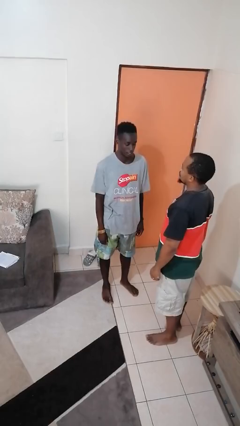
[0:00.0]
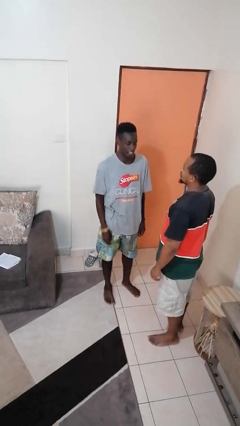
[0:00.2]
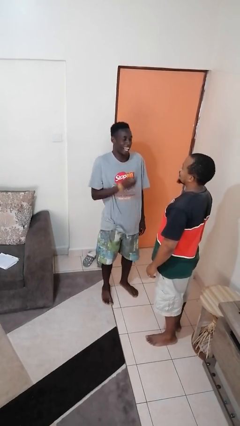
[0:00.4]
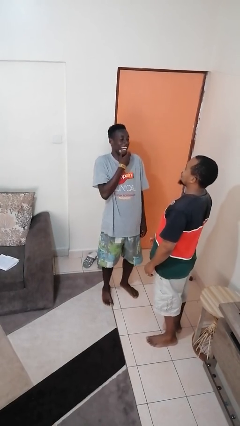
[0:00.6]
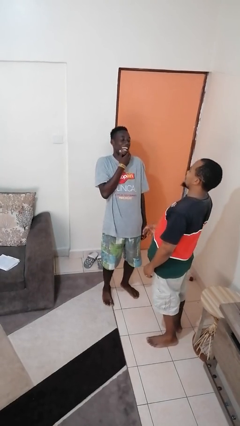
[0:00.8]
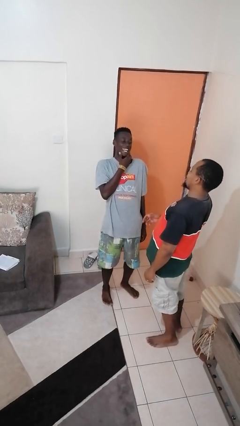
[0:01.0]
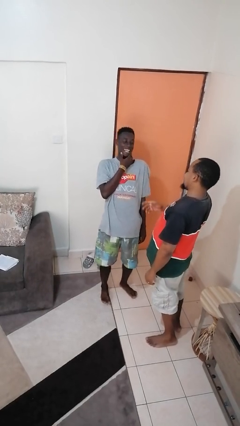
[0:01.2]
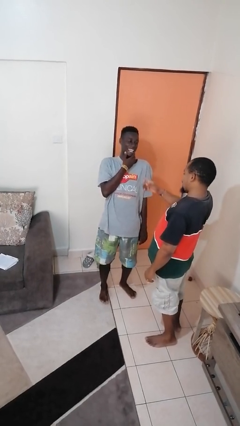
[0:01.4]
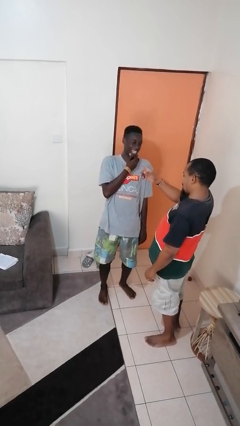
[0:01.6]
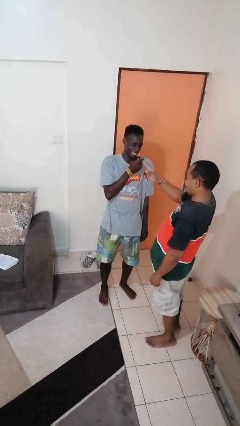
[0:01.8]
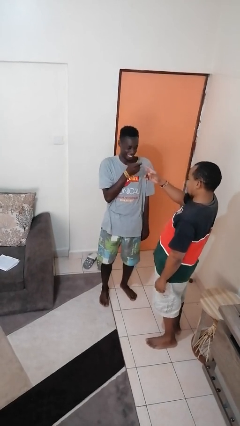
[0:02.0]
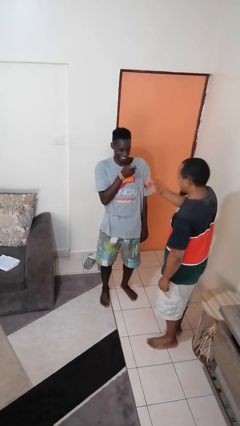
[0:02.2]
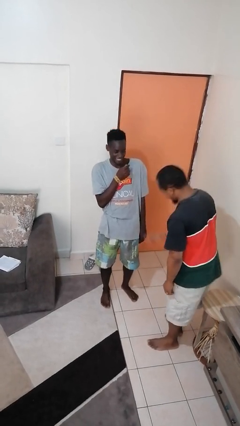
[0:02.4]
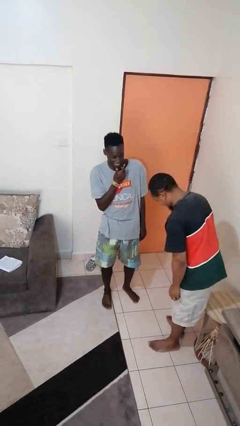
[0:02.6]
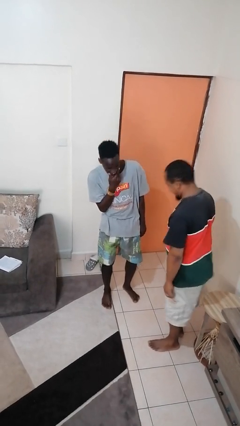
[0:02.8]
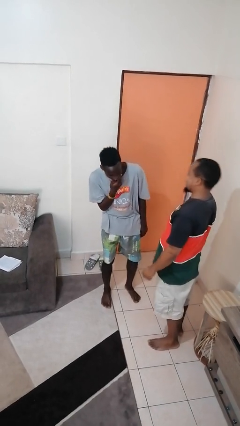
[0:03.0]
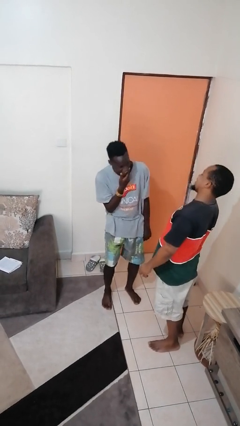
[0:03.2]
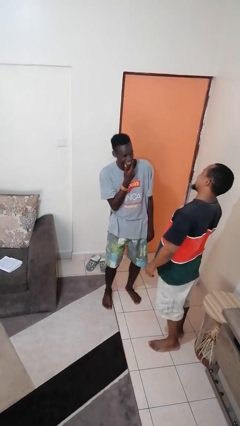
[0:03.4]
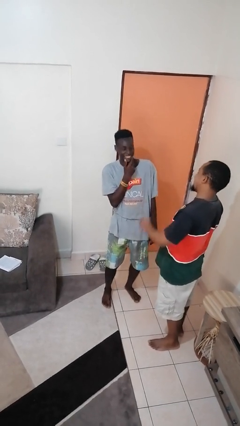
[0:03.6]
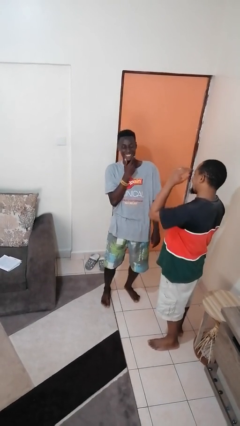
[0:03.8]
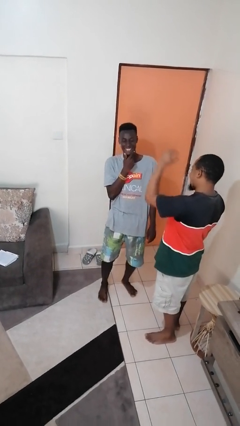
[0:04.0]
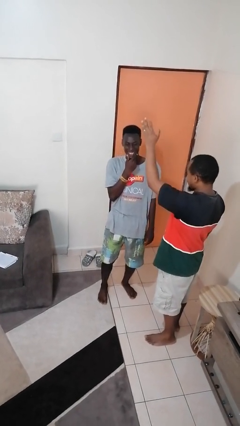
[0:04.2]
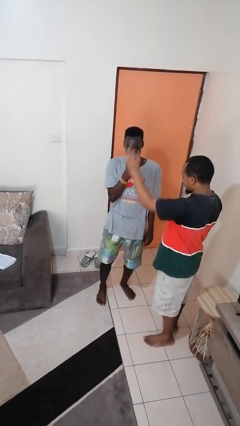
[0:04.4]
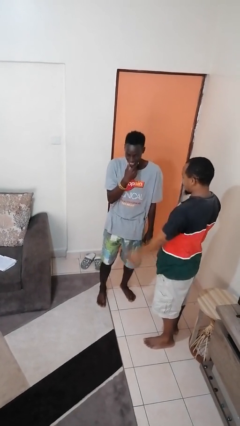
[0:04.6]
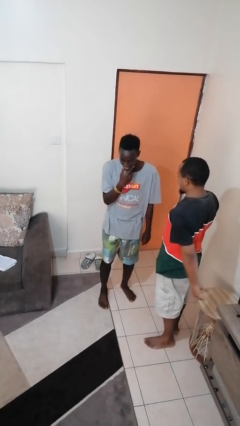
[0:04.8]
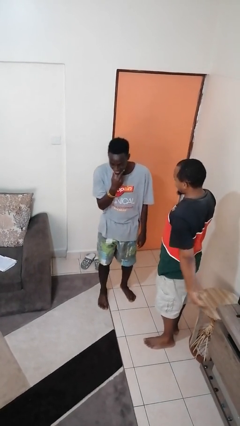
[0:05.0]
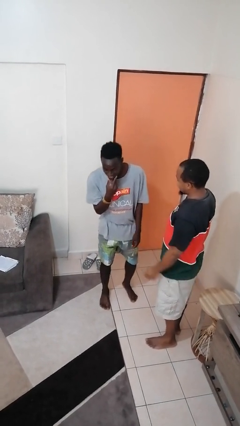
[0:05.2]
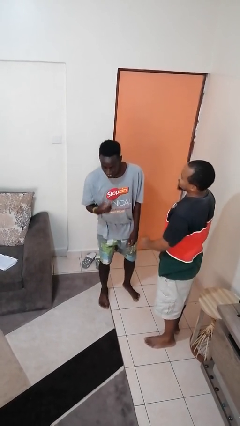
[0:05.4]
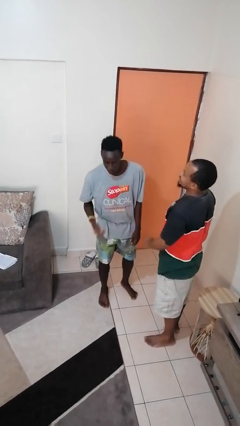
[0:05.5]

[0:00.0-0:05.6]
person laughs with person

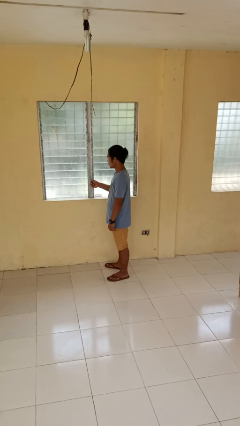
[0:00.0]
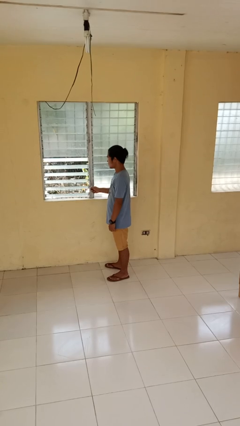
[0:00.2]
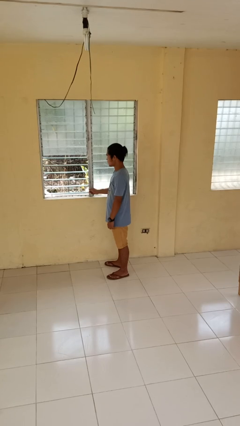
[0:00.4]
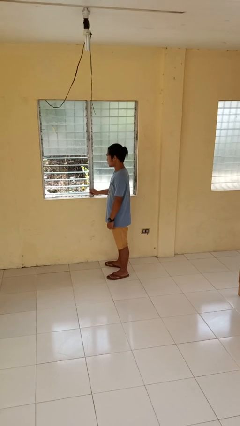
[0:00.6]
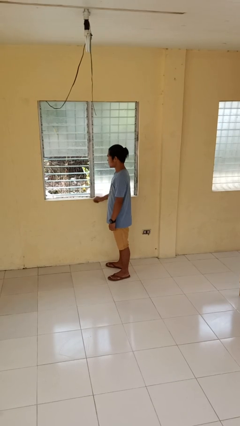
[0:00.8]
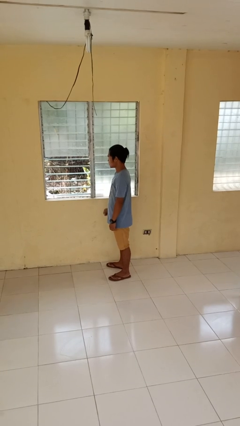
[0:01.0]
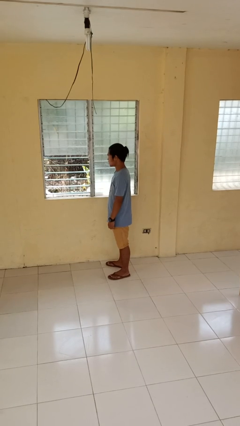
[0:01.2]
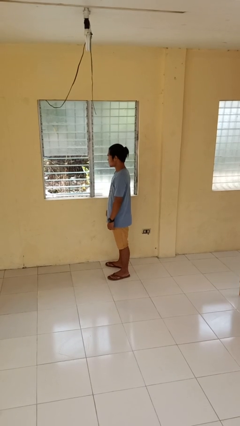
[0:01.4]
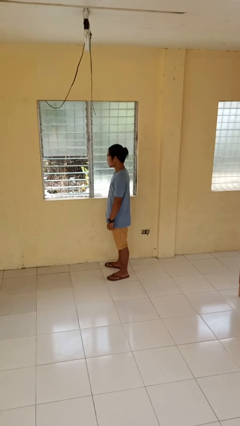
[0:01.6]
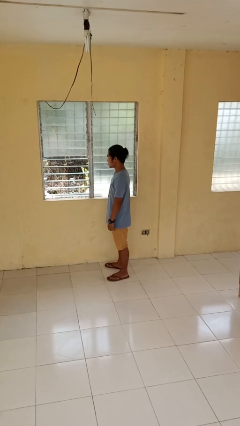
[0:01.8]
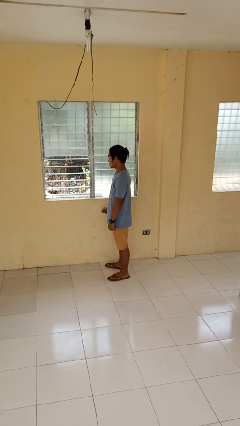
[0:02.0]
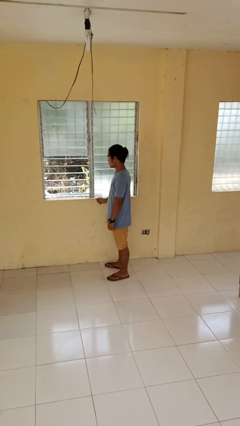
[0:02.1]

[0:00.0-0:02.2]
person opens home window

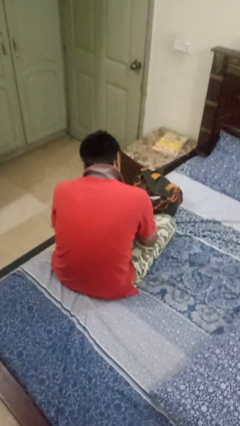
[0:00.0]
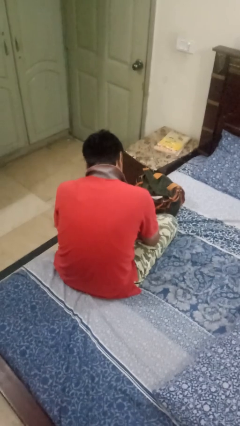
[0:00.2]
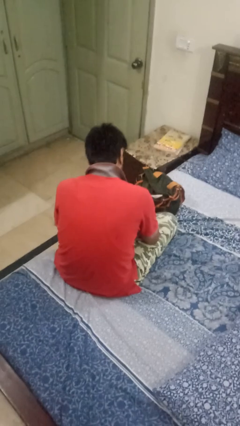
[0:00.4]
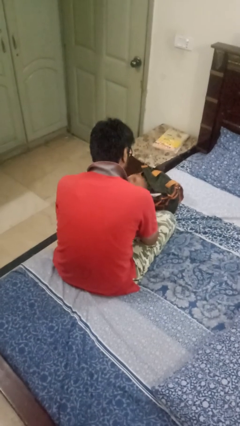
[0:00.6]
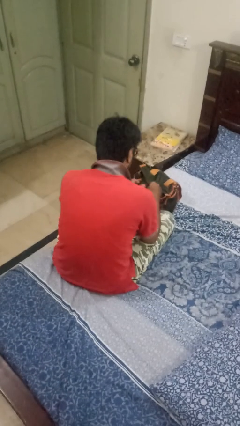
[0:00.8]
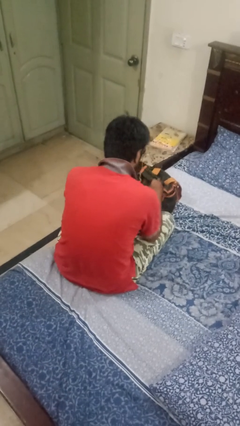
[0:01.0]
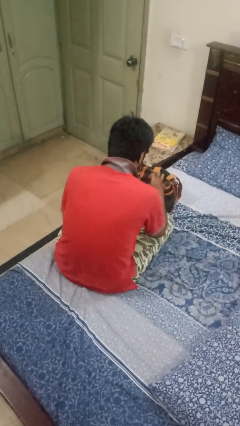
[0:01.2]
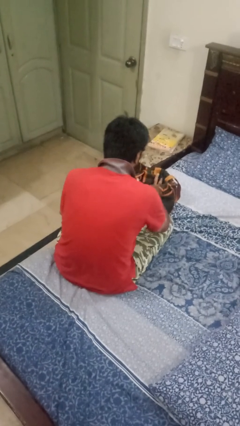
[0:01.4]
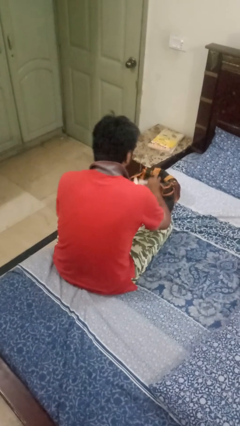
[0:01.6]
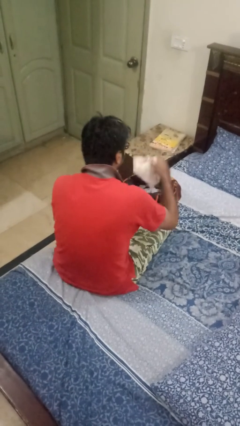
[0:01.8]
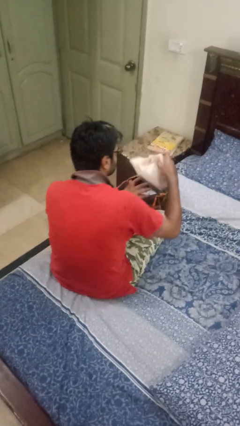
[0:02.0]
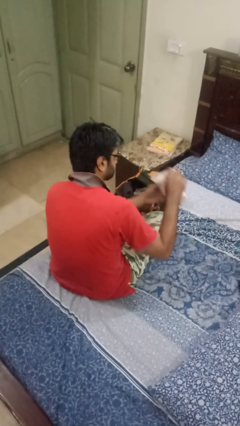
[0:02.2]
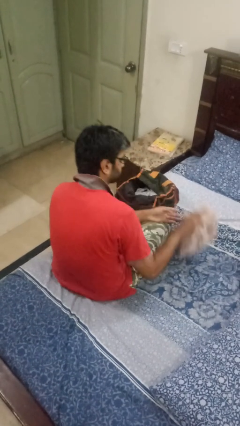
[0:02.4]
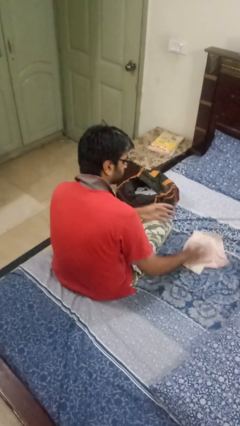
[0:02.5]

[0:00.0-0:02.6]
person takes object from bag

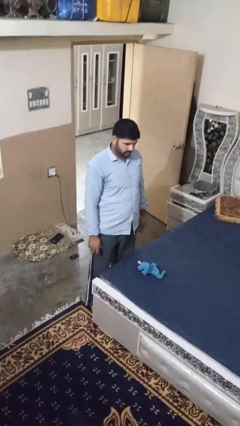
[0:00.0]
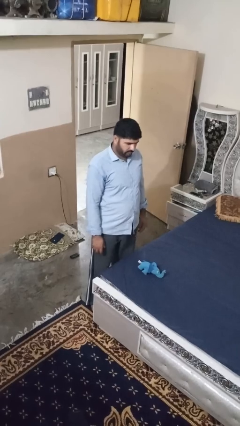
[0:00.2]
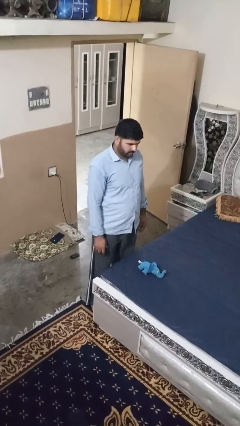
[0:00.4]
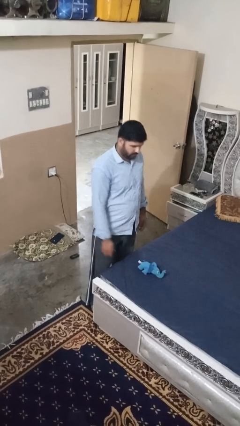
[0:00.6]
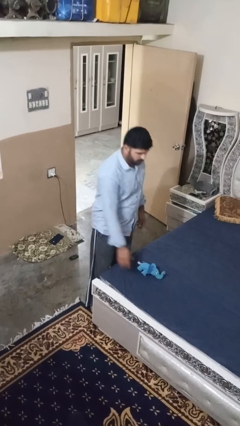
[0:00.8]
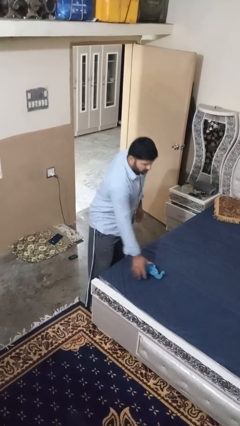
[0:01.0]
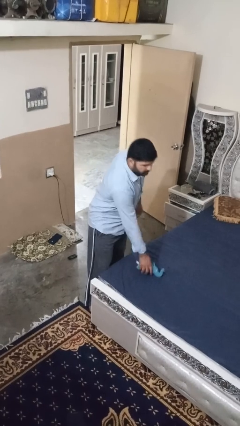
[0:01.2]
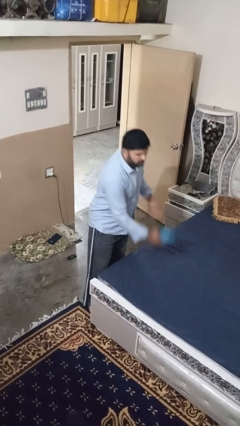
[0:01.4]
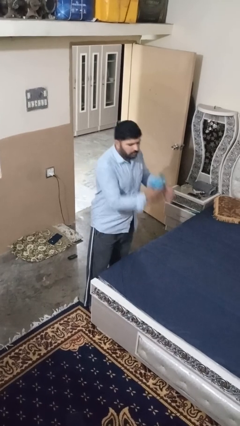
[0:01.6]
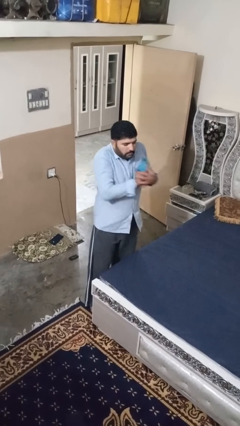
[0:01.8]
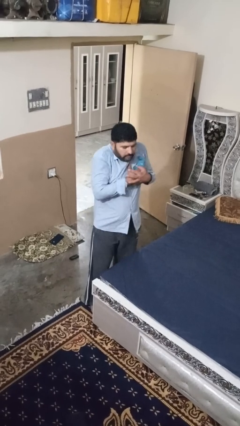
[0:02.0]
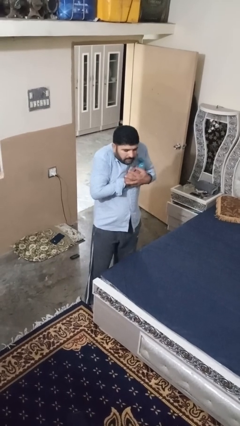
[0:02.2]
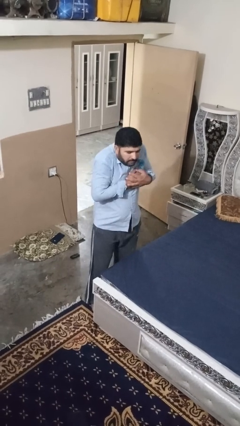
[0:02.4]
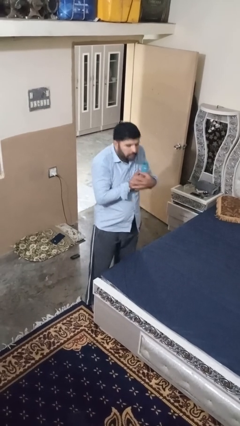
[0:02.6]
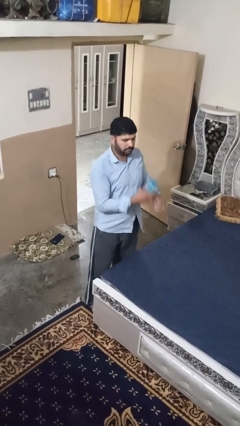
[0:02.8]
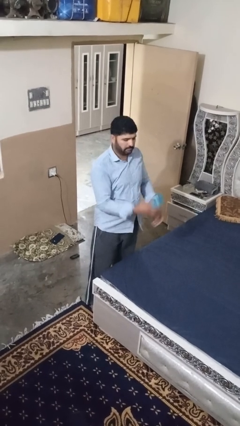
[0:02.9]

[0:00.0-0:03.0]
person hugs stuffed animal

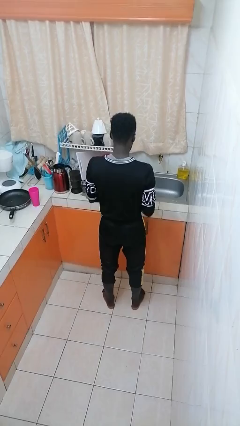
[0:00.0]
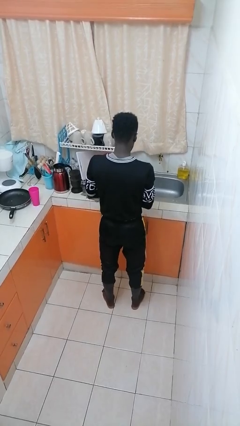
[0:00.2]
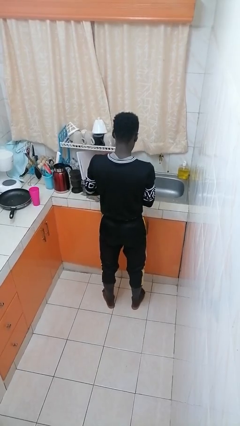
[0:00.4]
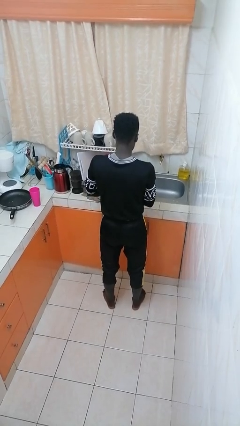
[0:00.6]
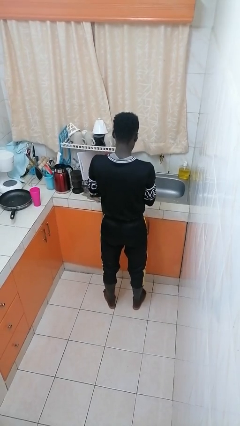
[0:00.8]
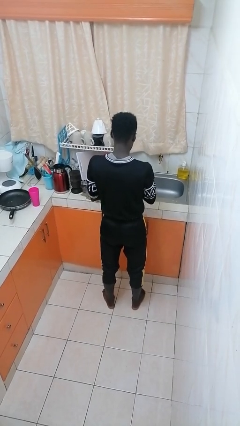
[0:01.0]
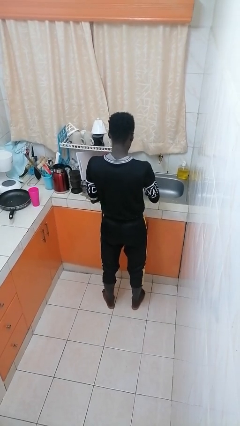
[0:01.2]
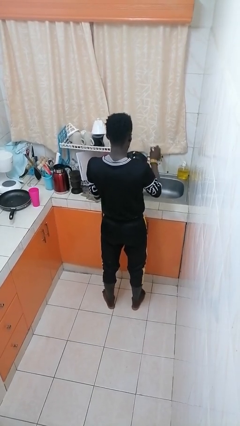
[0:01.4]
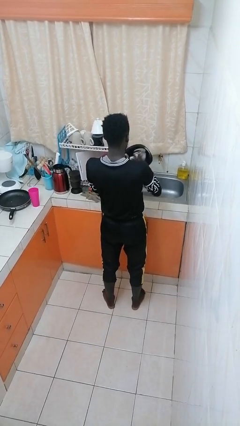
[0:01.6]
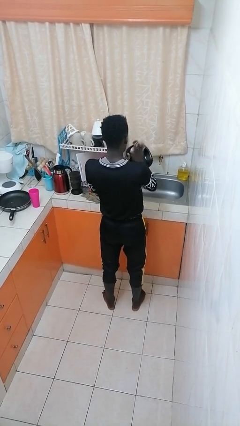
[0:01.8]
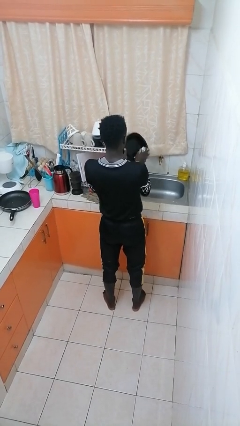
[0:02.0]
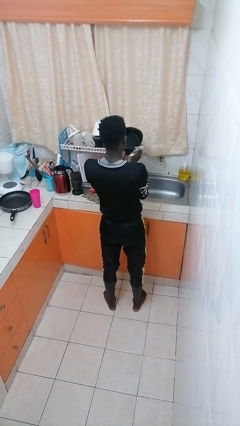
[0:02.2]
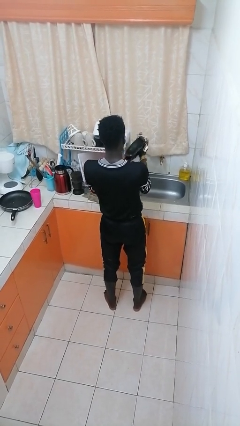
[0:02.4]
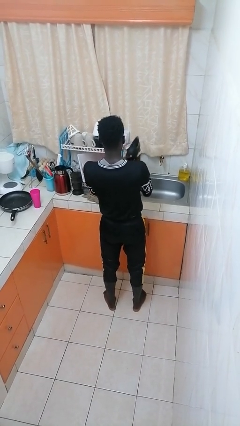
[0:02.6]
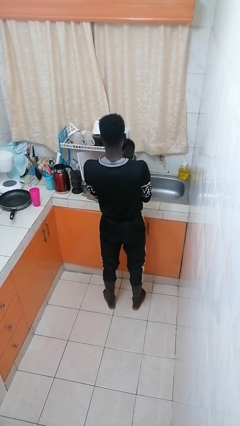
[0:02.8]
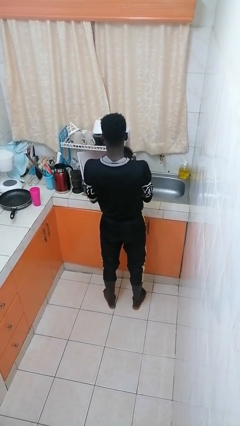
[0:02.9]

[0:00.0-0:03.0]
person dries dish

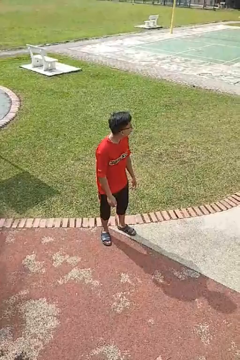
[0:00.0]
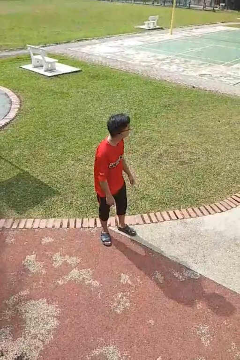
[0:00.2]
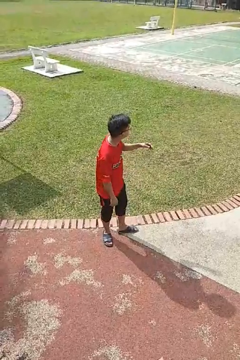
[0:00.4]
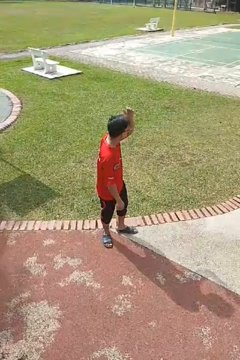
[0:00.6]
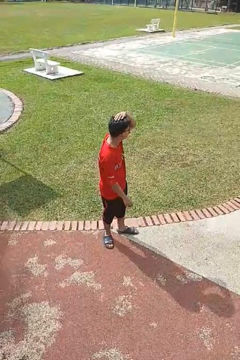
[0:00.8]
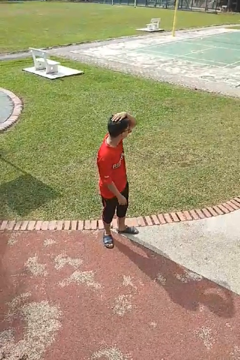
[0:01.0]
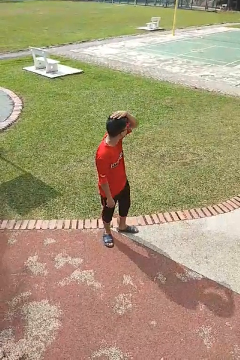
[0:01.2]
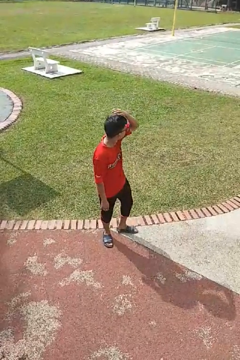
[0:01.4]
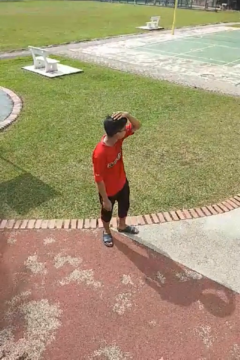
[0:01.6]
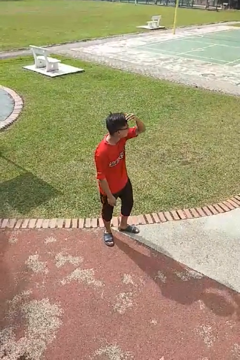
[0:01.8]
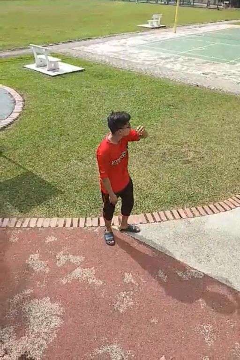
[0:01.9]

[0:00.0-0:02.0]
person pats head
